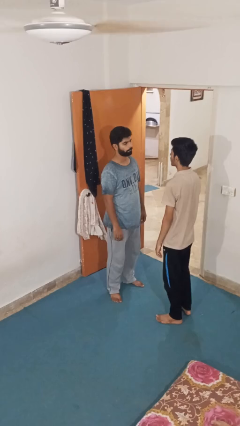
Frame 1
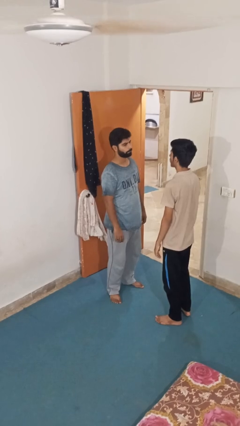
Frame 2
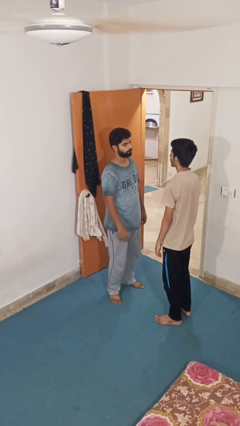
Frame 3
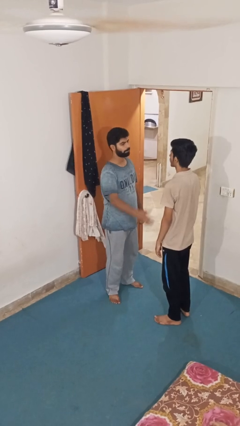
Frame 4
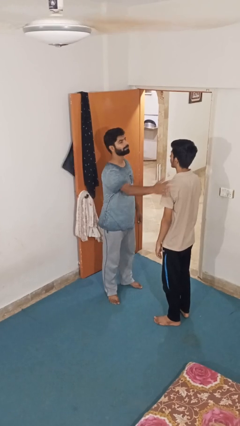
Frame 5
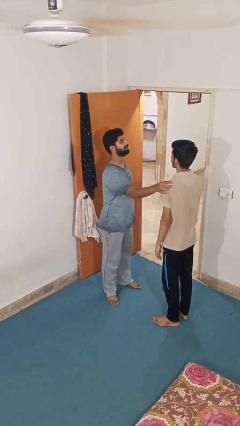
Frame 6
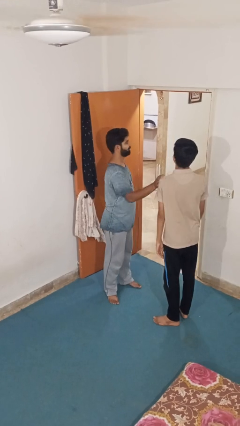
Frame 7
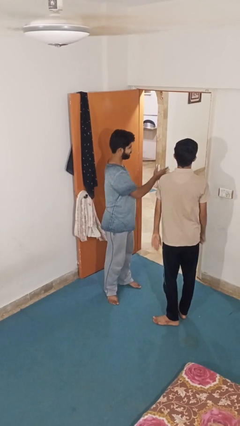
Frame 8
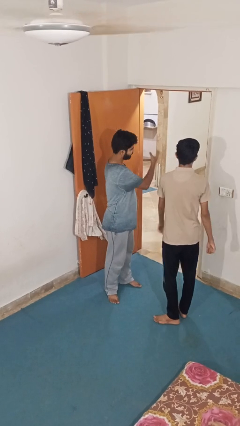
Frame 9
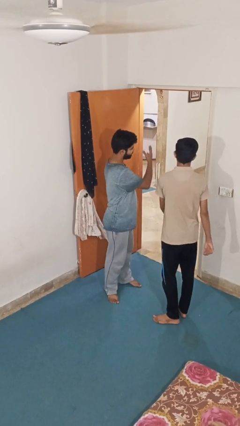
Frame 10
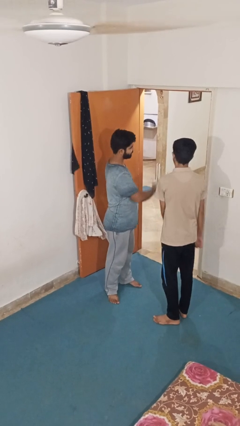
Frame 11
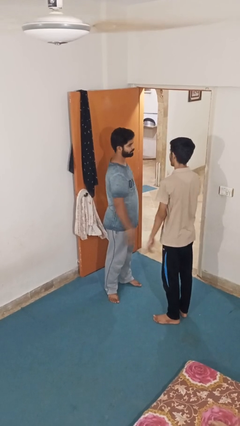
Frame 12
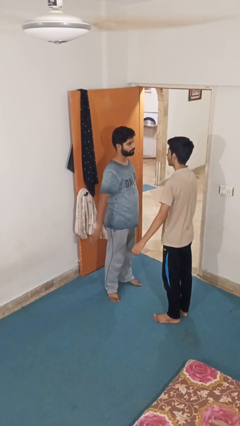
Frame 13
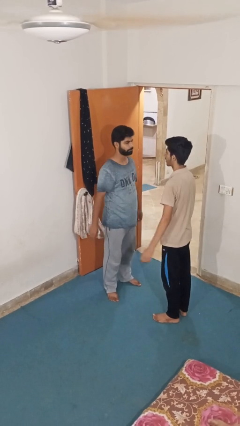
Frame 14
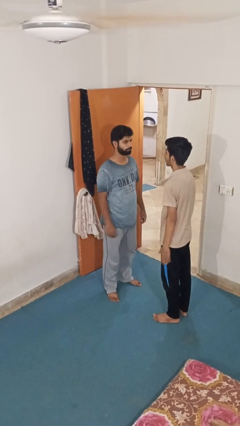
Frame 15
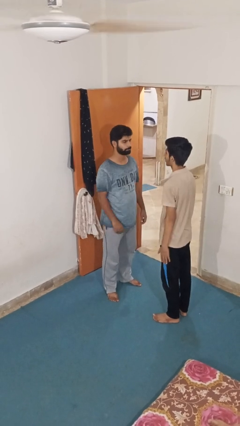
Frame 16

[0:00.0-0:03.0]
person shoves person

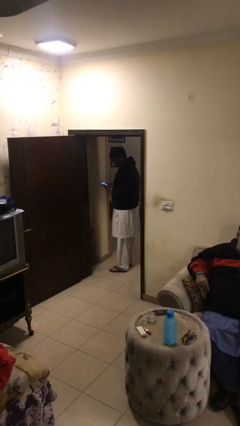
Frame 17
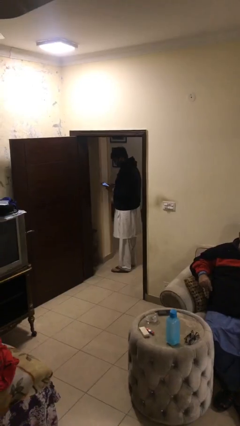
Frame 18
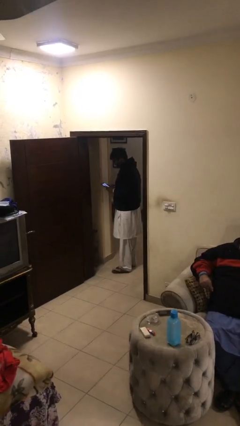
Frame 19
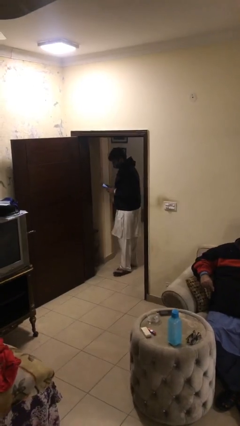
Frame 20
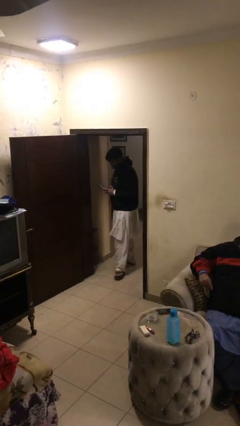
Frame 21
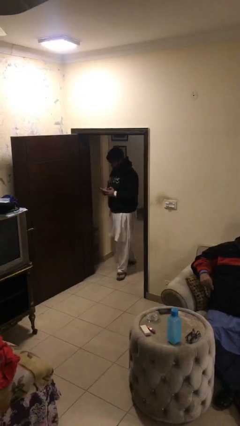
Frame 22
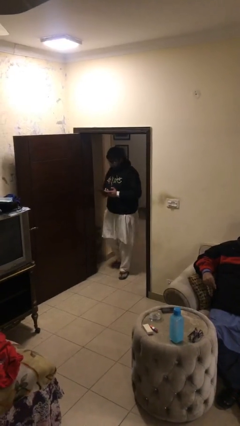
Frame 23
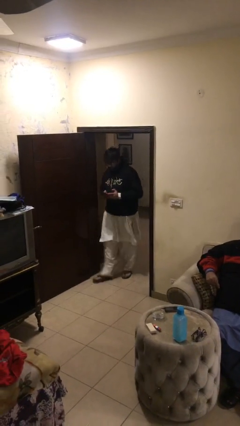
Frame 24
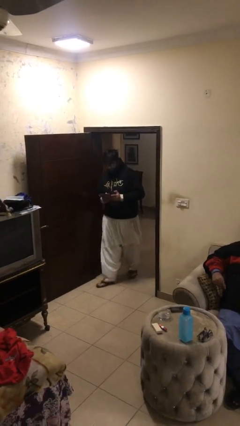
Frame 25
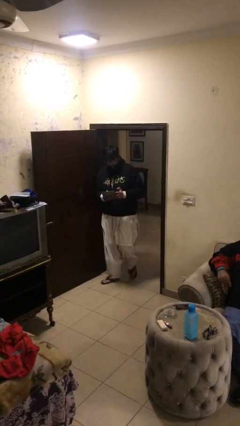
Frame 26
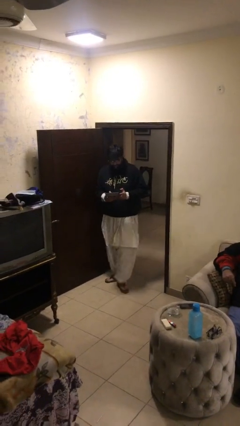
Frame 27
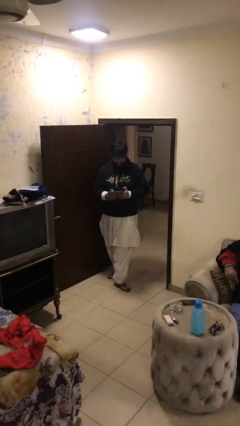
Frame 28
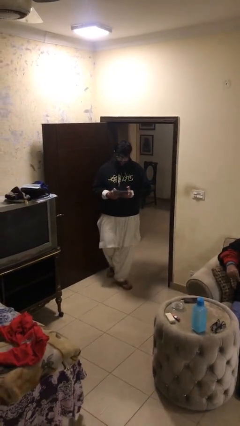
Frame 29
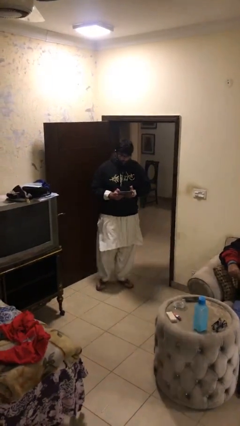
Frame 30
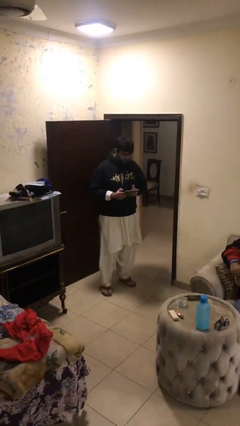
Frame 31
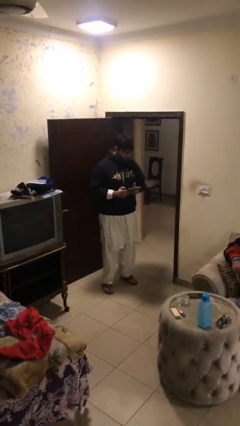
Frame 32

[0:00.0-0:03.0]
person enters scene through structure

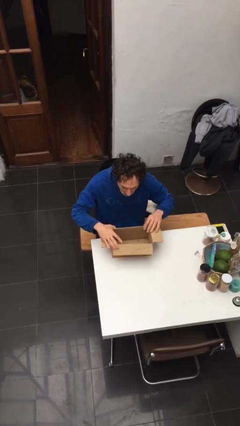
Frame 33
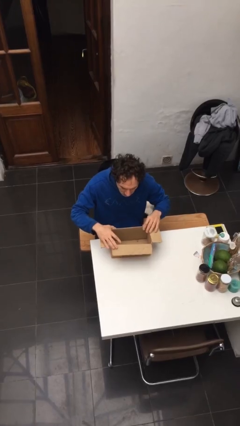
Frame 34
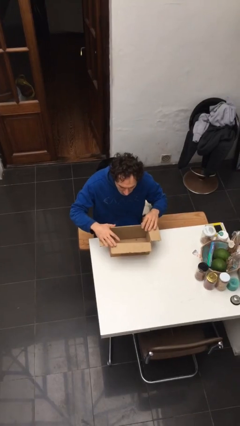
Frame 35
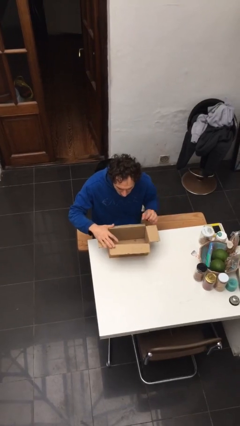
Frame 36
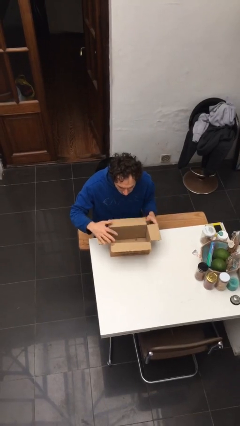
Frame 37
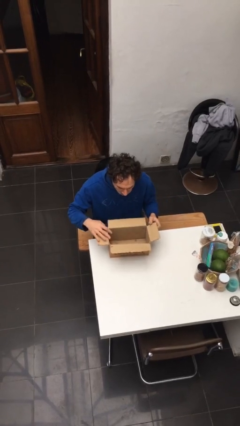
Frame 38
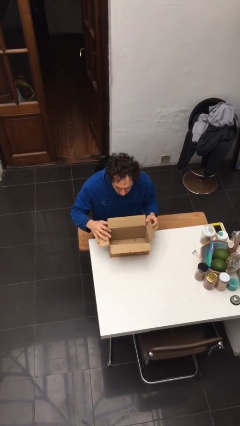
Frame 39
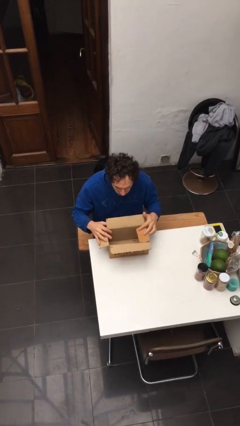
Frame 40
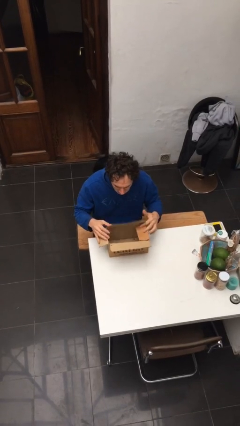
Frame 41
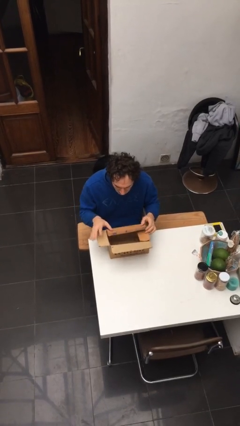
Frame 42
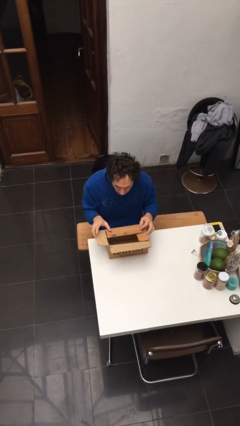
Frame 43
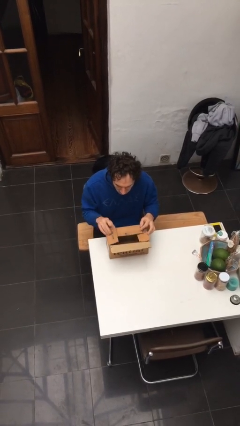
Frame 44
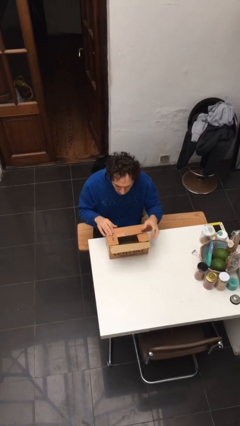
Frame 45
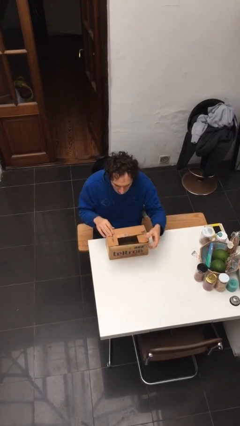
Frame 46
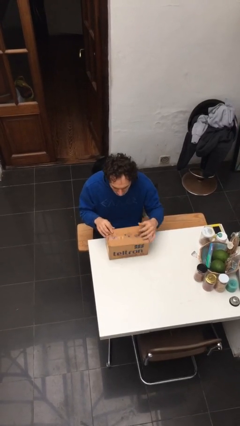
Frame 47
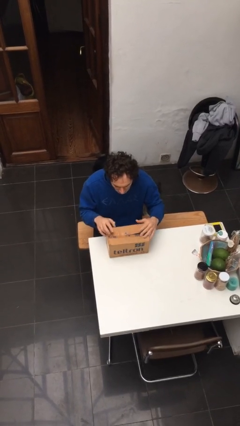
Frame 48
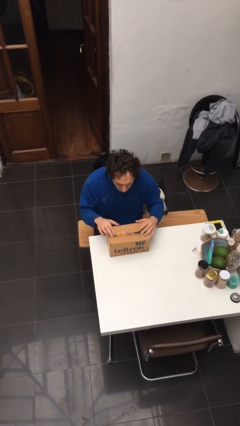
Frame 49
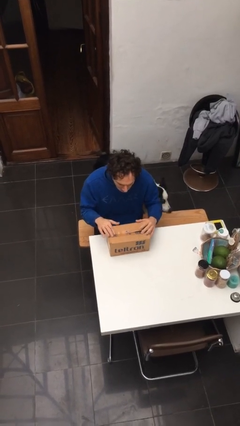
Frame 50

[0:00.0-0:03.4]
person closes box

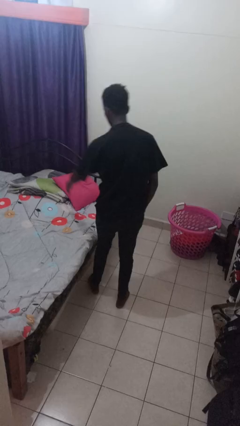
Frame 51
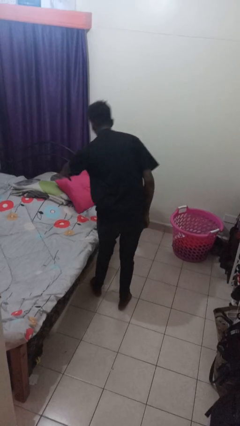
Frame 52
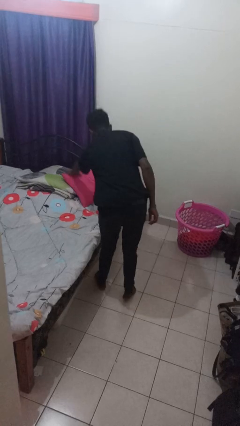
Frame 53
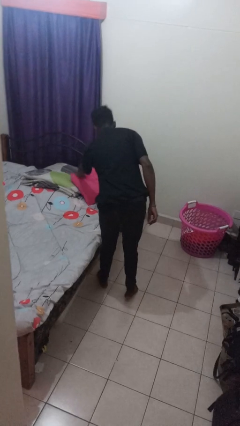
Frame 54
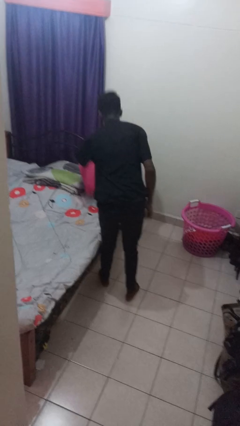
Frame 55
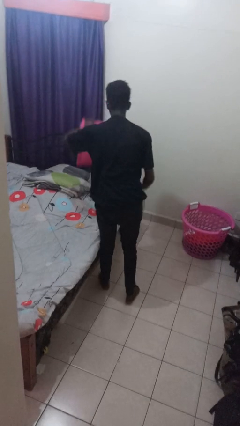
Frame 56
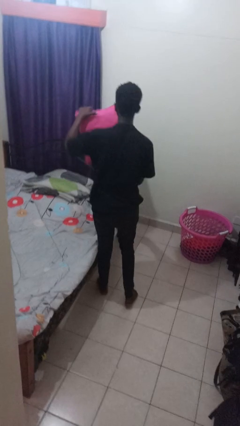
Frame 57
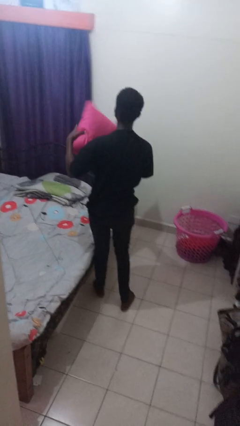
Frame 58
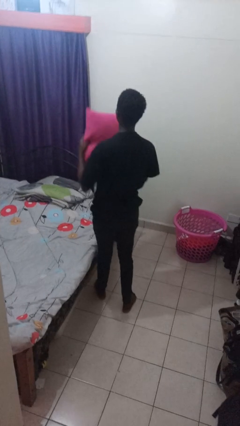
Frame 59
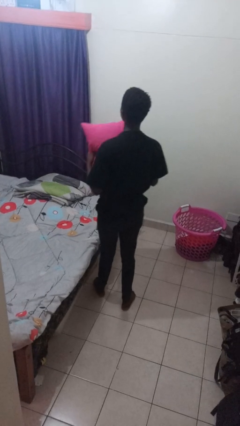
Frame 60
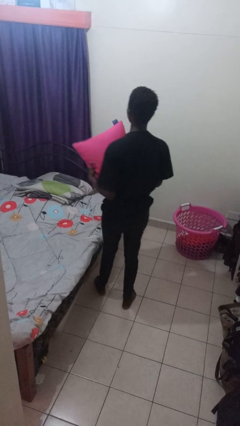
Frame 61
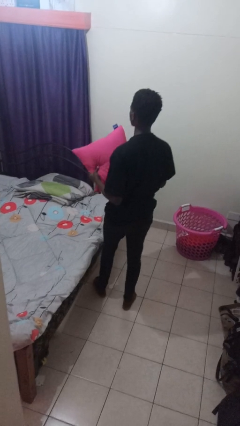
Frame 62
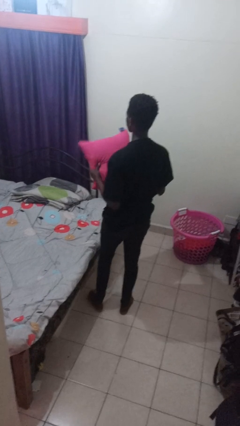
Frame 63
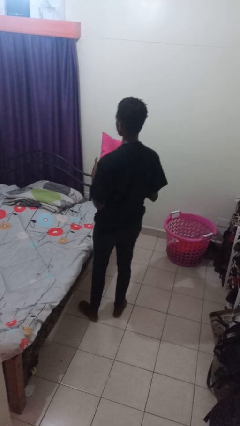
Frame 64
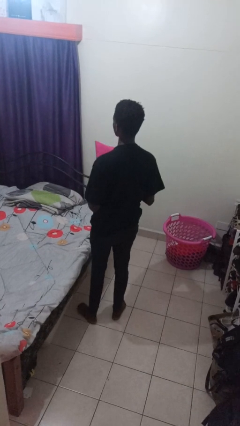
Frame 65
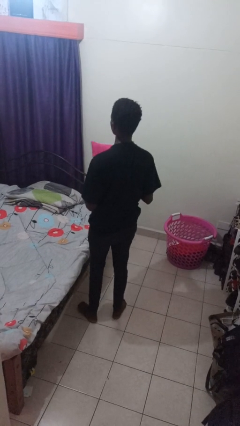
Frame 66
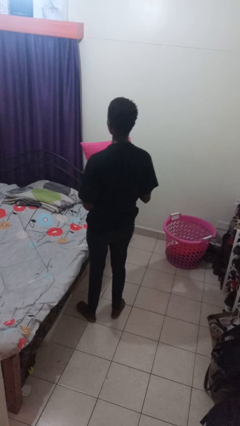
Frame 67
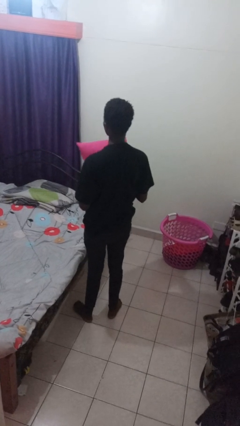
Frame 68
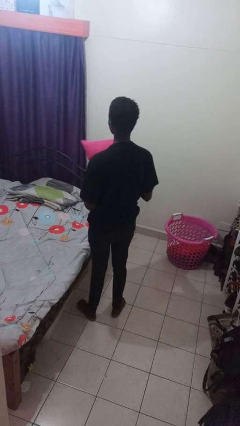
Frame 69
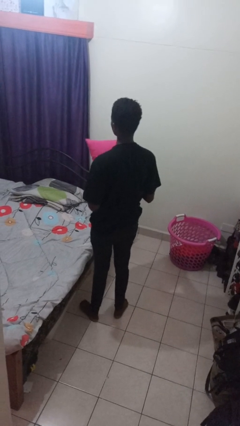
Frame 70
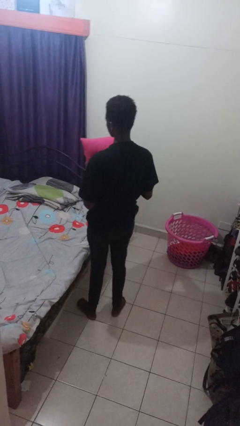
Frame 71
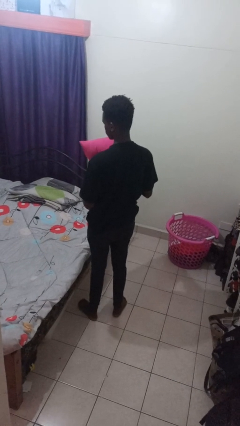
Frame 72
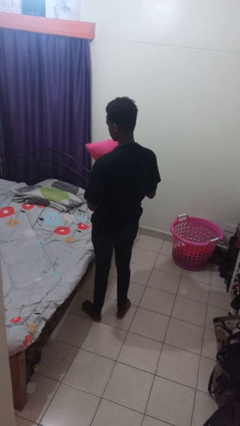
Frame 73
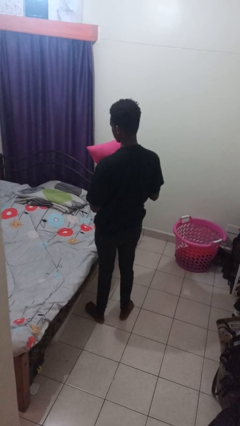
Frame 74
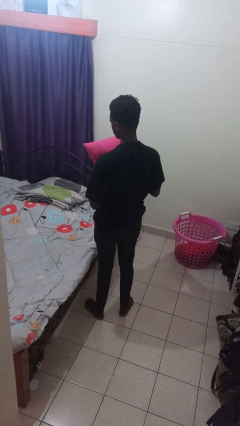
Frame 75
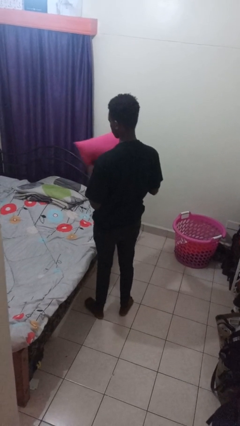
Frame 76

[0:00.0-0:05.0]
person picks up object from bed

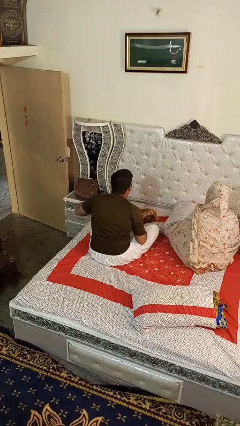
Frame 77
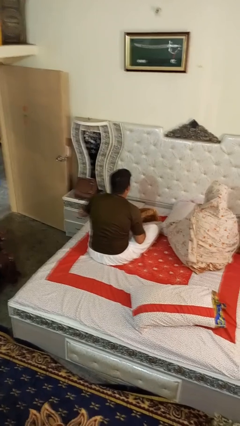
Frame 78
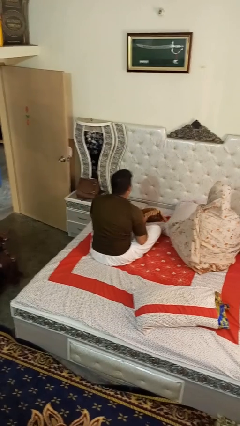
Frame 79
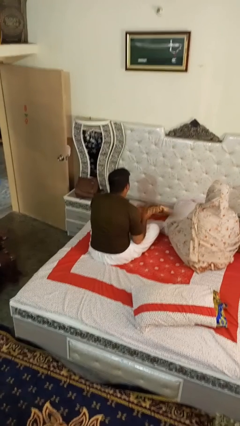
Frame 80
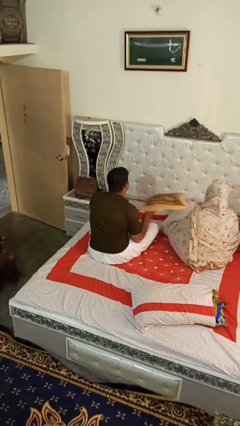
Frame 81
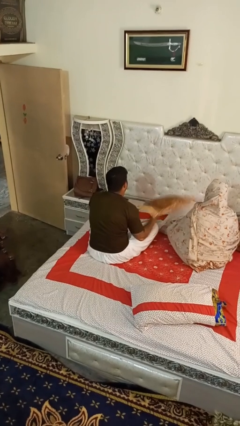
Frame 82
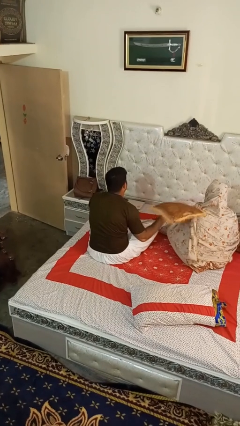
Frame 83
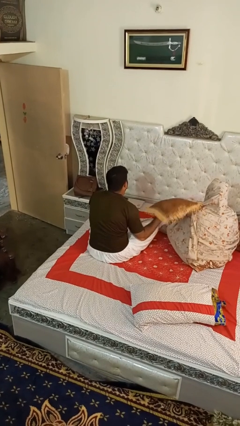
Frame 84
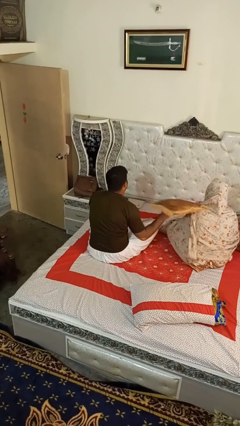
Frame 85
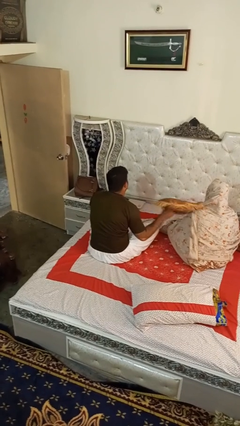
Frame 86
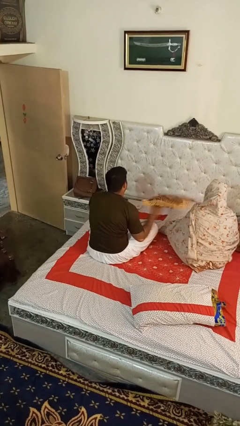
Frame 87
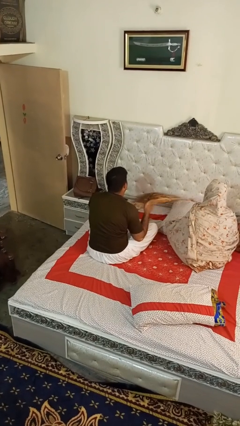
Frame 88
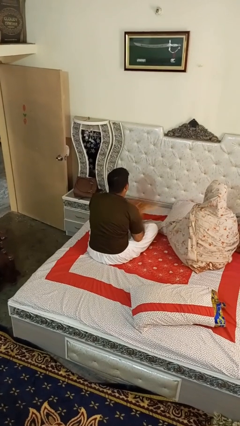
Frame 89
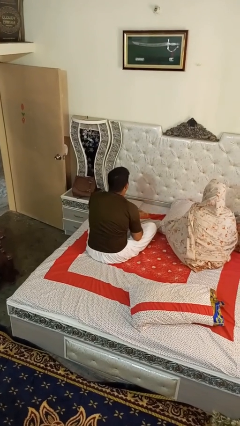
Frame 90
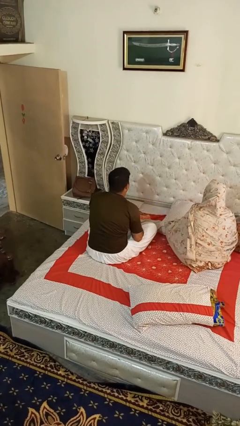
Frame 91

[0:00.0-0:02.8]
person hits person with pillow
